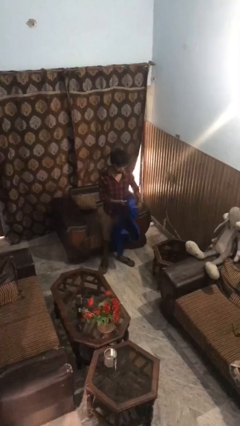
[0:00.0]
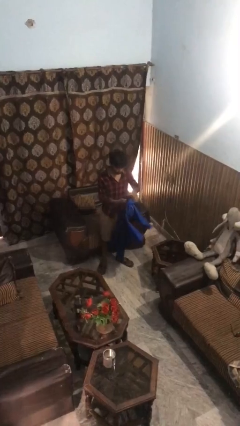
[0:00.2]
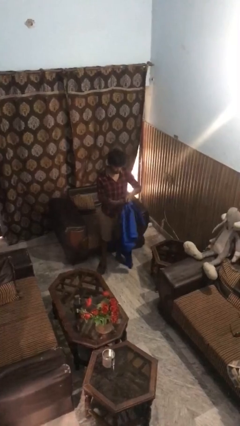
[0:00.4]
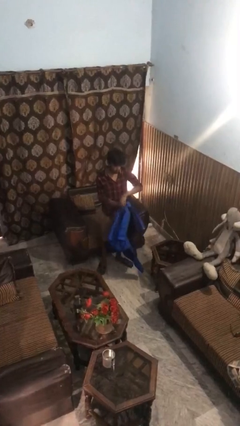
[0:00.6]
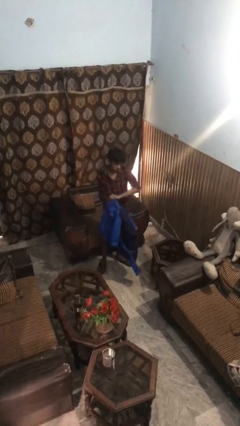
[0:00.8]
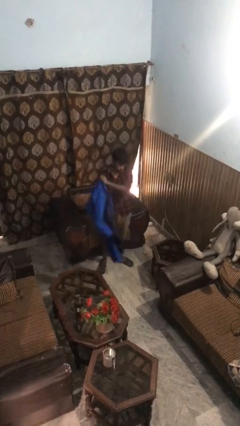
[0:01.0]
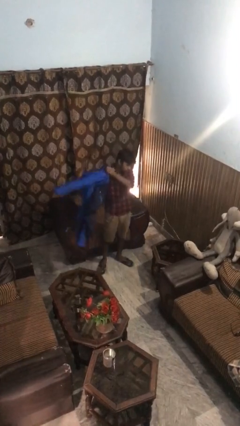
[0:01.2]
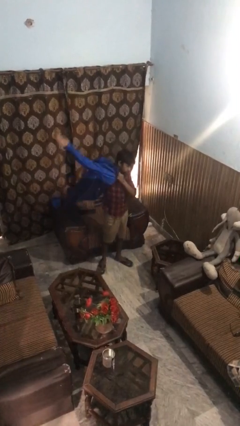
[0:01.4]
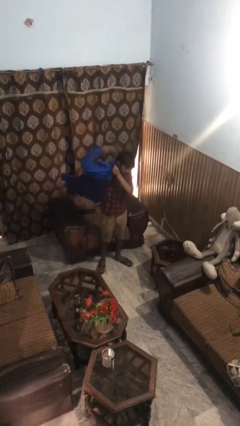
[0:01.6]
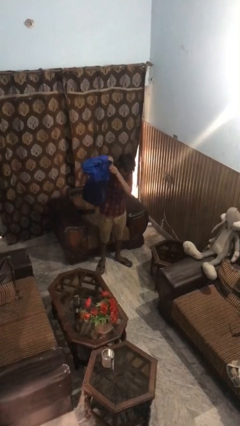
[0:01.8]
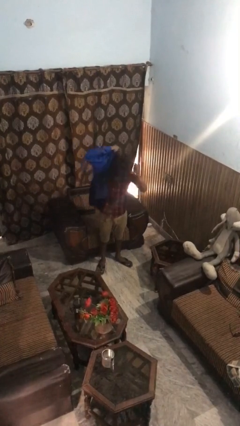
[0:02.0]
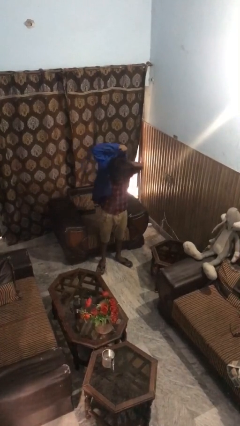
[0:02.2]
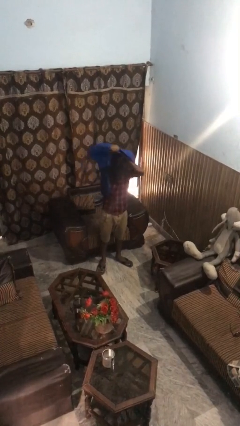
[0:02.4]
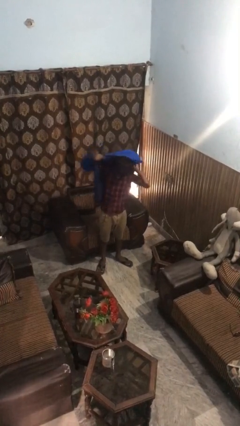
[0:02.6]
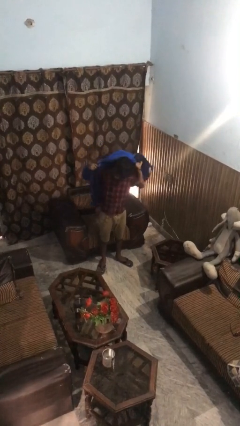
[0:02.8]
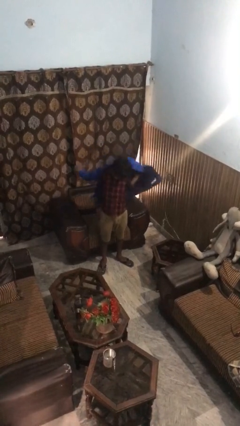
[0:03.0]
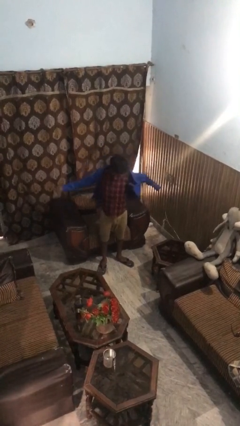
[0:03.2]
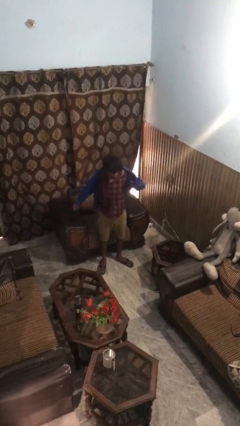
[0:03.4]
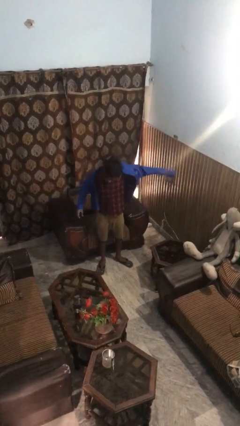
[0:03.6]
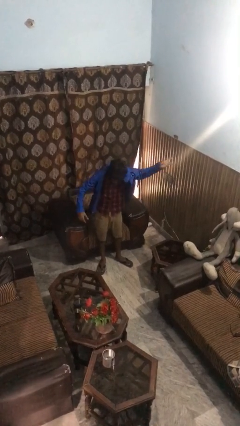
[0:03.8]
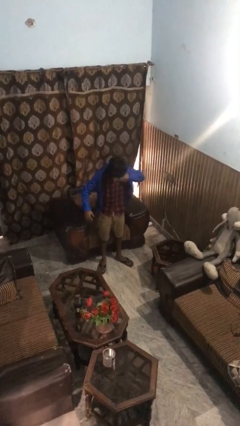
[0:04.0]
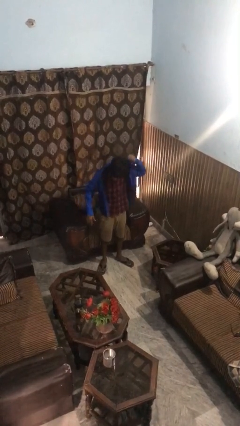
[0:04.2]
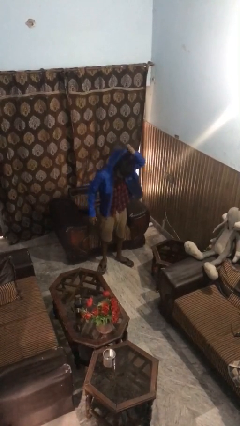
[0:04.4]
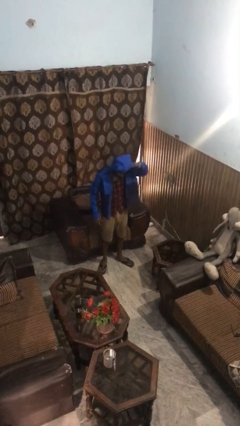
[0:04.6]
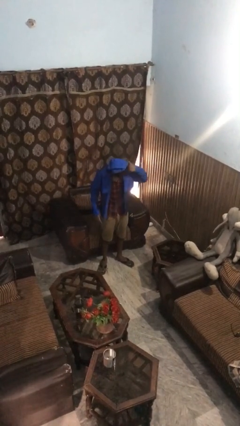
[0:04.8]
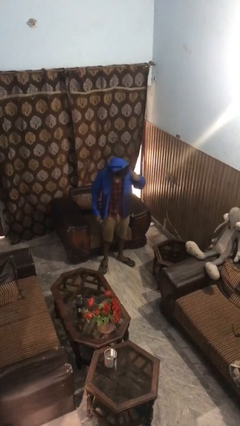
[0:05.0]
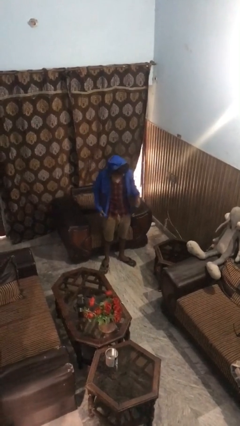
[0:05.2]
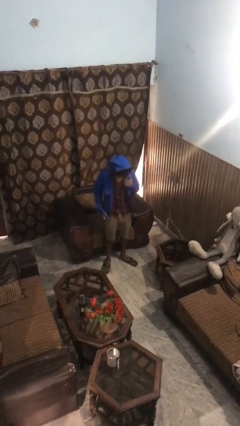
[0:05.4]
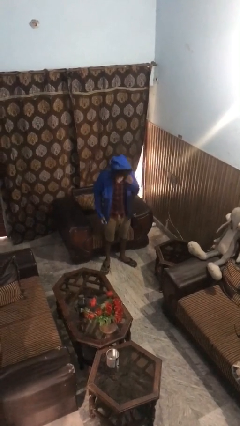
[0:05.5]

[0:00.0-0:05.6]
person puts on hoodie

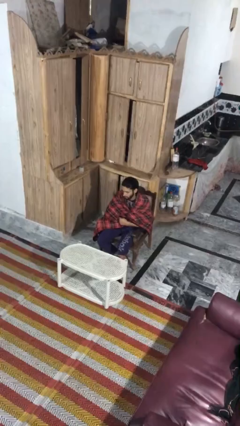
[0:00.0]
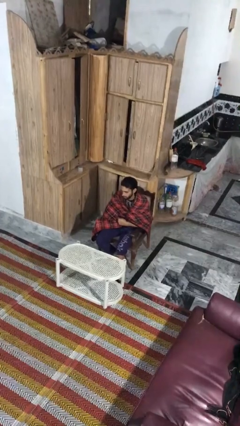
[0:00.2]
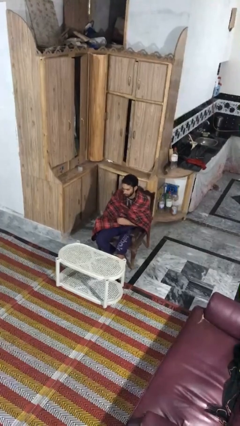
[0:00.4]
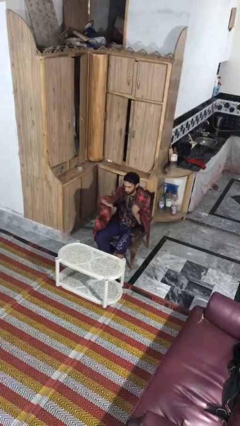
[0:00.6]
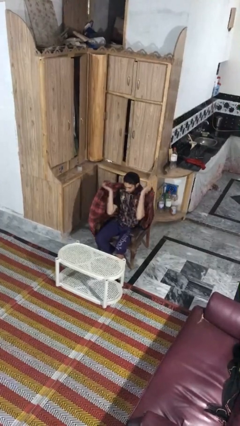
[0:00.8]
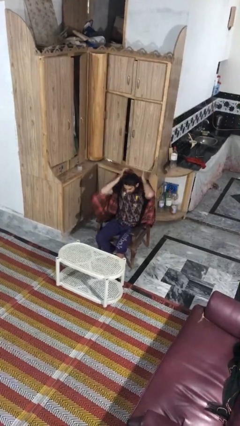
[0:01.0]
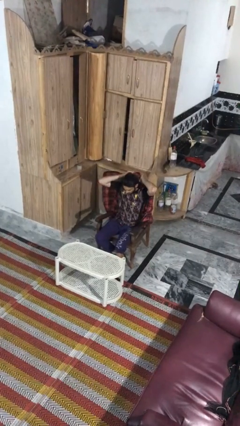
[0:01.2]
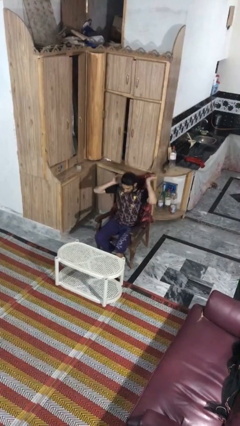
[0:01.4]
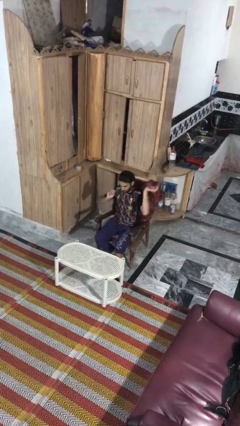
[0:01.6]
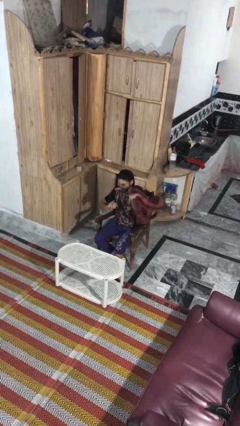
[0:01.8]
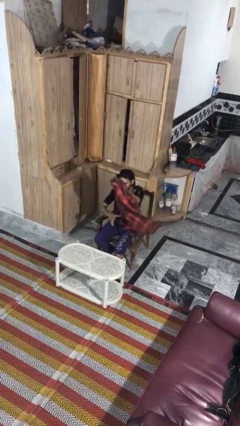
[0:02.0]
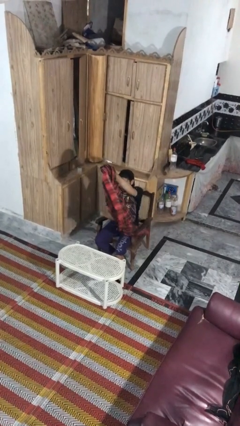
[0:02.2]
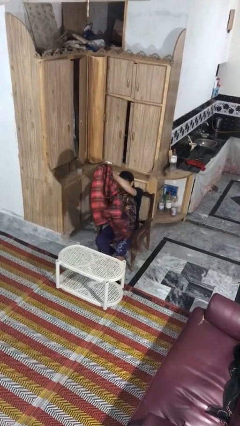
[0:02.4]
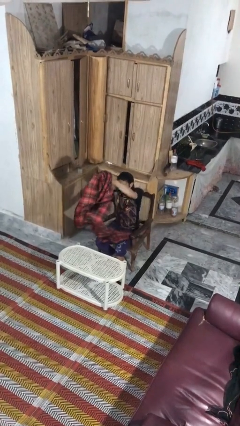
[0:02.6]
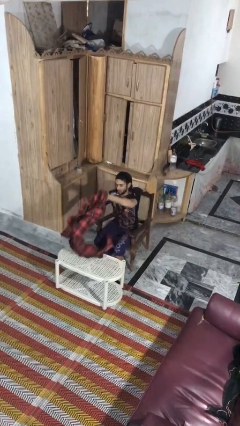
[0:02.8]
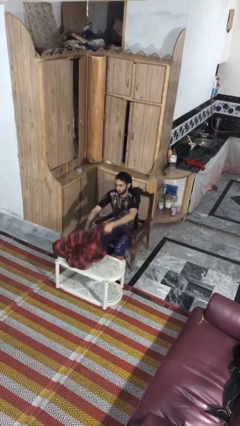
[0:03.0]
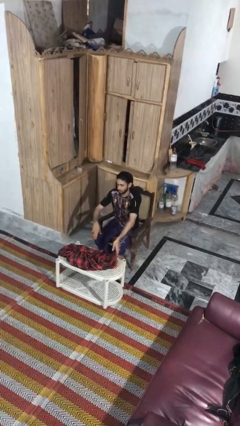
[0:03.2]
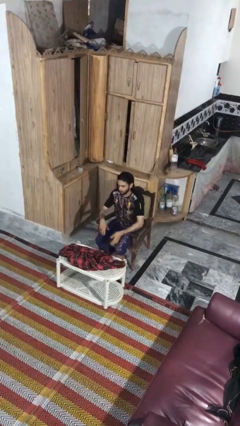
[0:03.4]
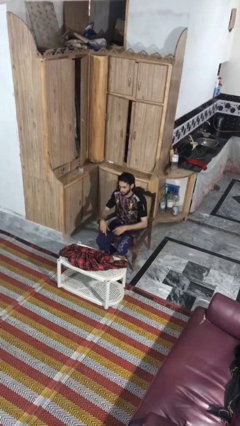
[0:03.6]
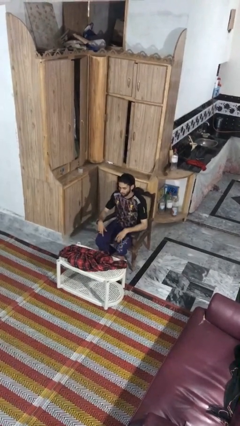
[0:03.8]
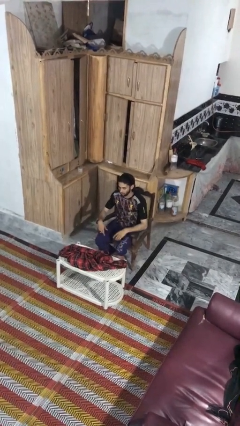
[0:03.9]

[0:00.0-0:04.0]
person uncovers with blanket

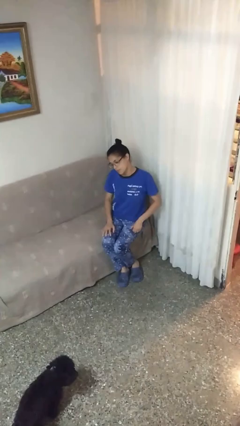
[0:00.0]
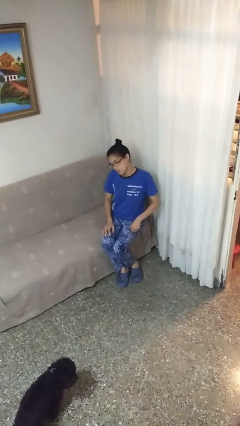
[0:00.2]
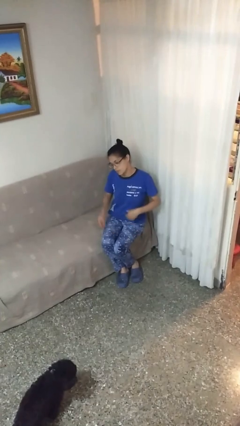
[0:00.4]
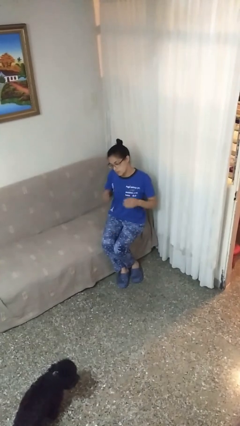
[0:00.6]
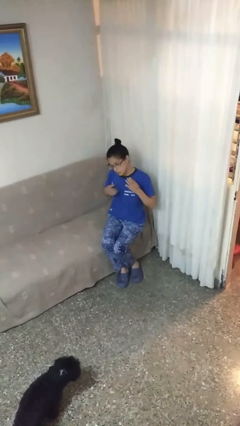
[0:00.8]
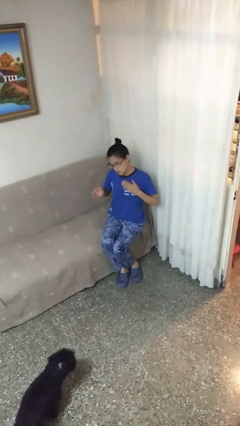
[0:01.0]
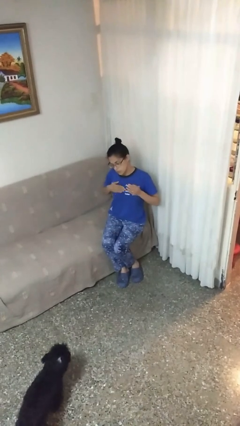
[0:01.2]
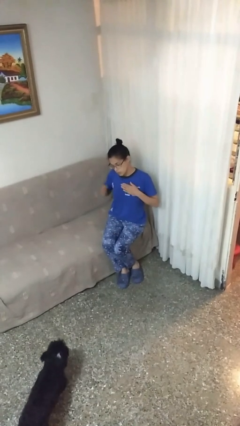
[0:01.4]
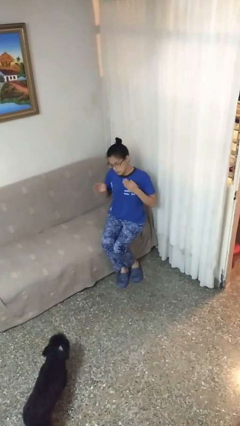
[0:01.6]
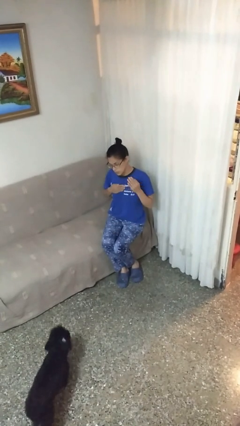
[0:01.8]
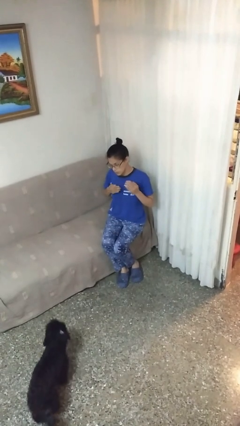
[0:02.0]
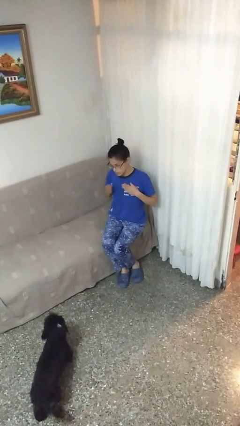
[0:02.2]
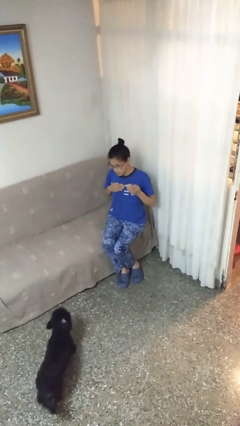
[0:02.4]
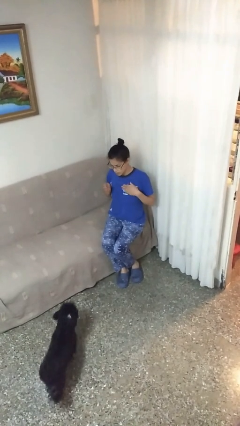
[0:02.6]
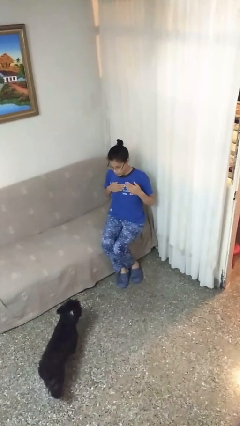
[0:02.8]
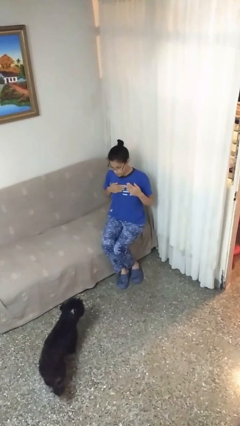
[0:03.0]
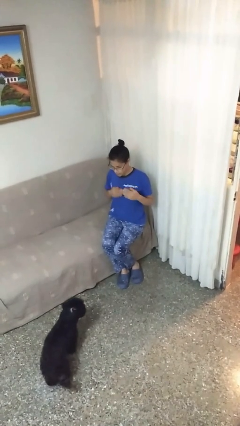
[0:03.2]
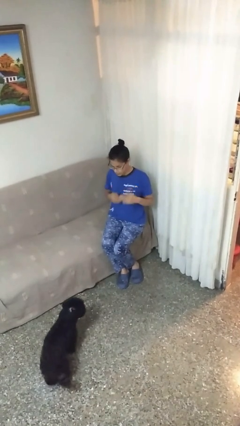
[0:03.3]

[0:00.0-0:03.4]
person drums on chest

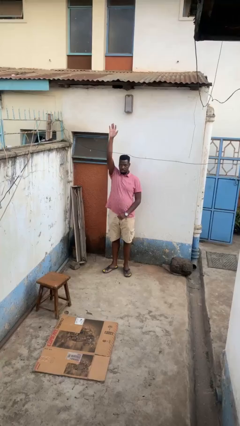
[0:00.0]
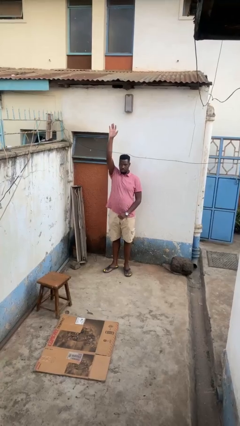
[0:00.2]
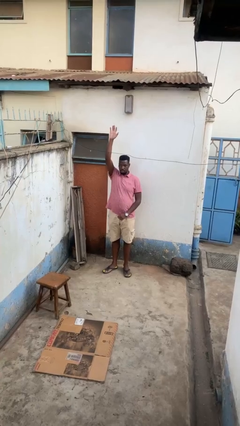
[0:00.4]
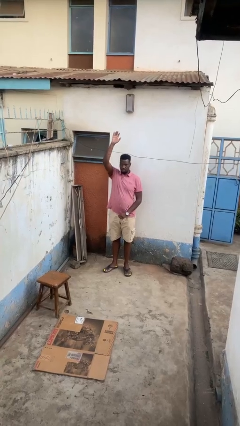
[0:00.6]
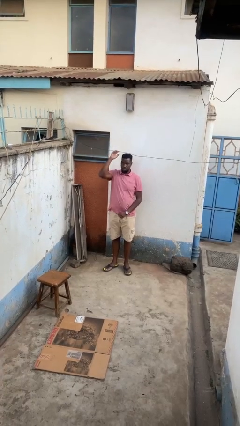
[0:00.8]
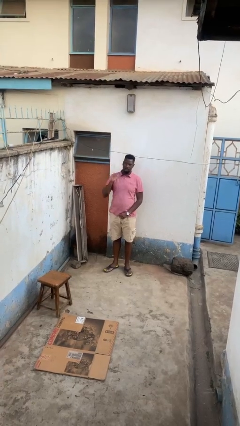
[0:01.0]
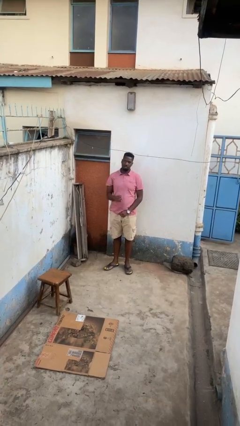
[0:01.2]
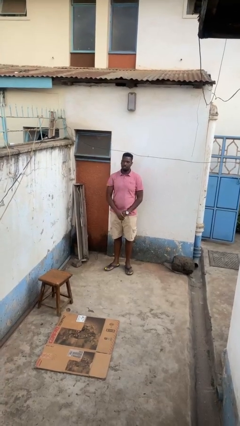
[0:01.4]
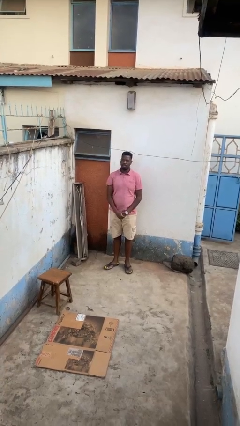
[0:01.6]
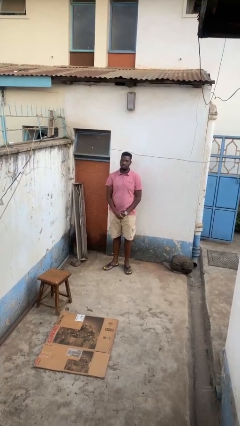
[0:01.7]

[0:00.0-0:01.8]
person gestures lower hand

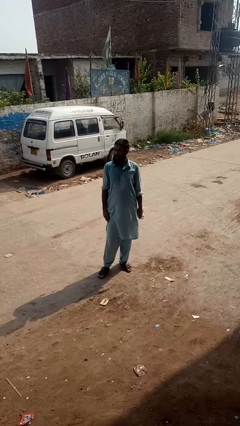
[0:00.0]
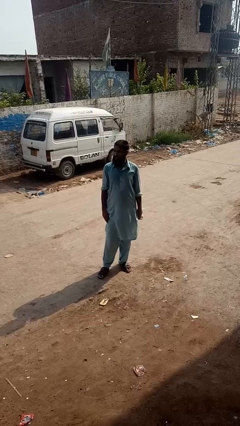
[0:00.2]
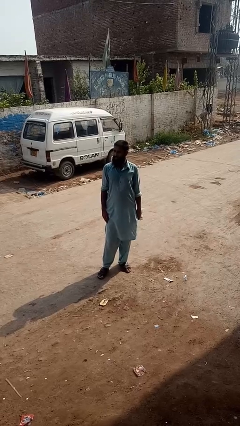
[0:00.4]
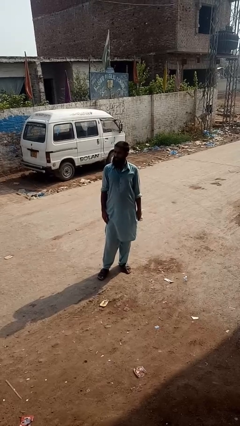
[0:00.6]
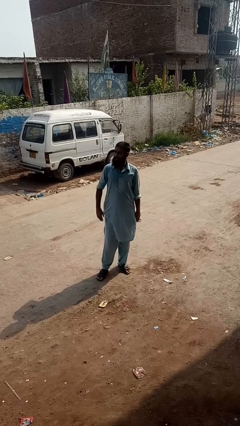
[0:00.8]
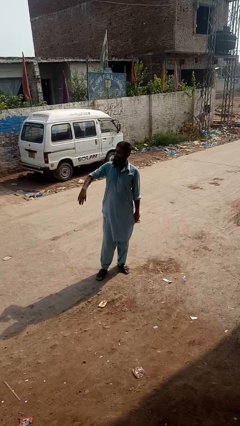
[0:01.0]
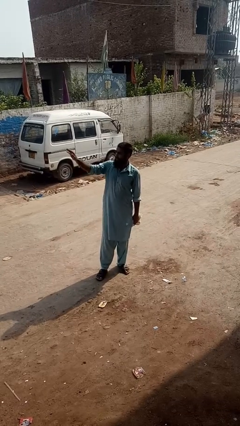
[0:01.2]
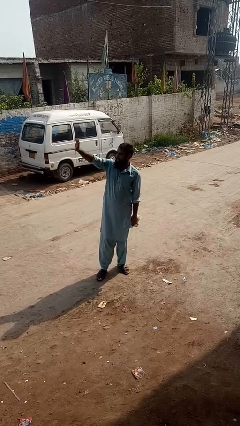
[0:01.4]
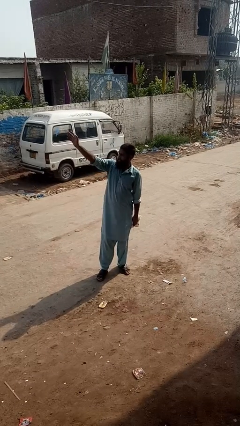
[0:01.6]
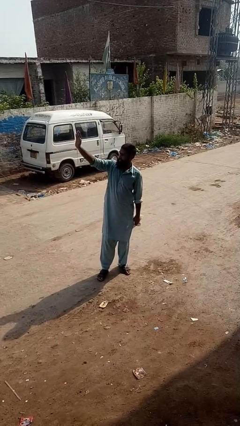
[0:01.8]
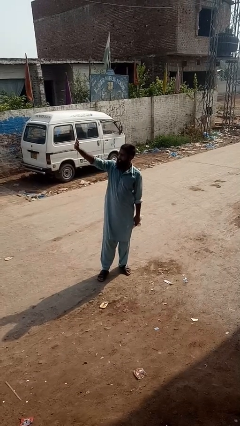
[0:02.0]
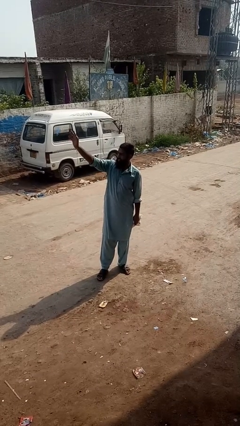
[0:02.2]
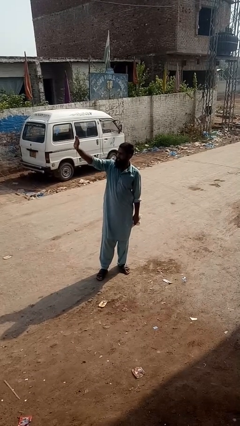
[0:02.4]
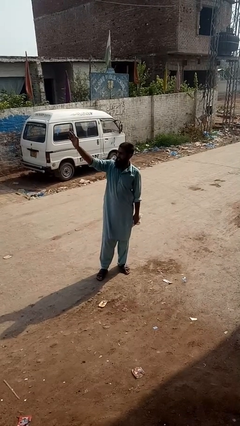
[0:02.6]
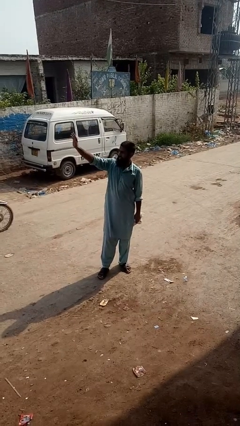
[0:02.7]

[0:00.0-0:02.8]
person waves at person

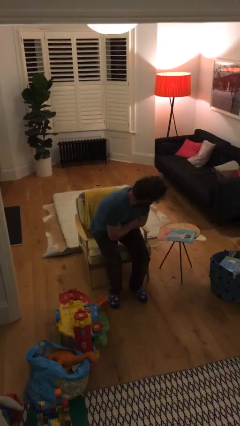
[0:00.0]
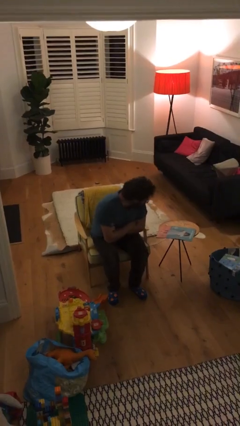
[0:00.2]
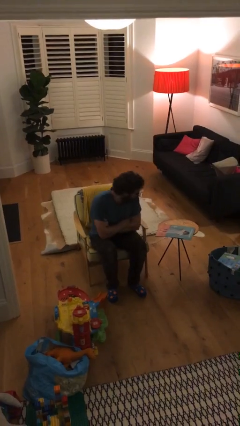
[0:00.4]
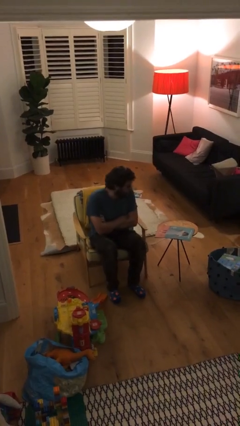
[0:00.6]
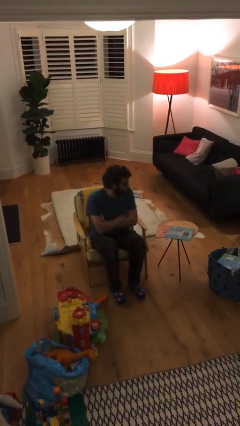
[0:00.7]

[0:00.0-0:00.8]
person sits down
